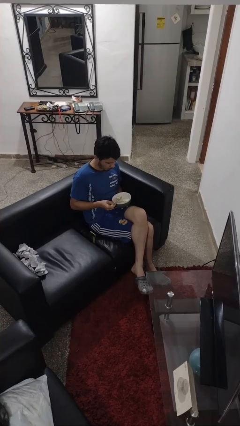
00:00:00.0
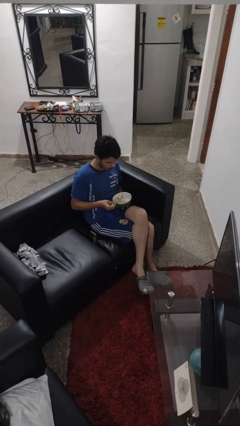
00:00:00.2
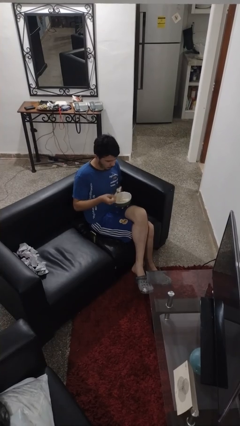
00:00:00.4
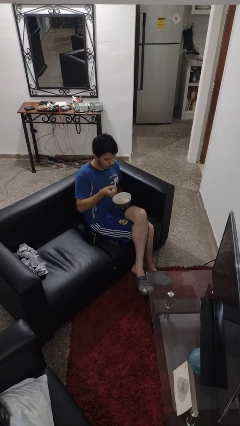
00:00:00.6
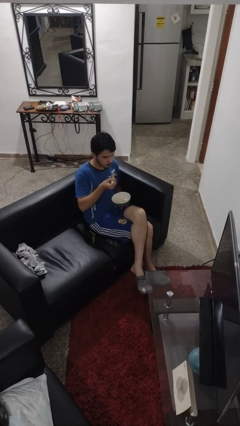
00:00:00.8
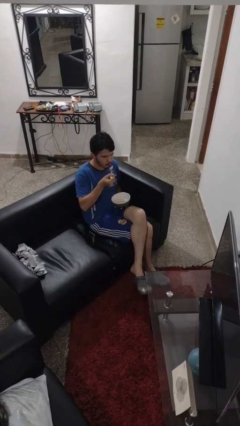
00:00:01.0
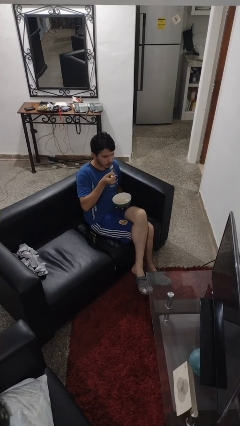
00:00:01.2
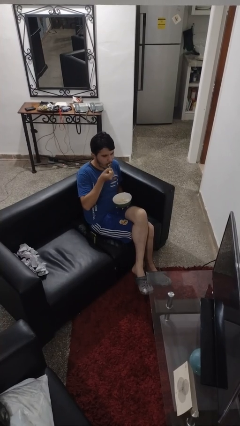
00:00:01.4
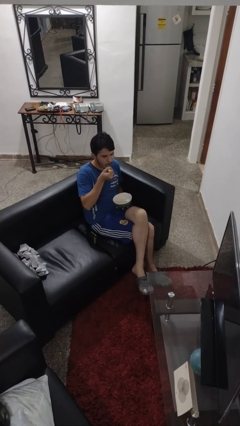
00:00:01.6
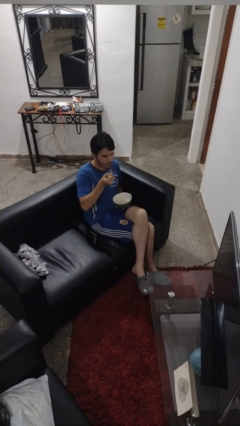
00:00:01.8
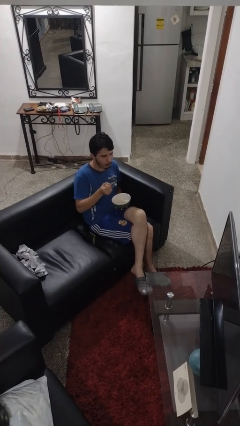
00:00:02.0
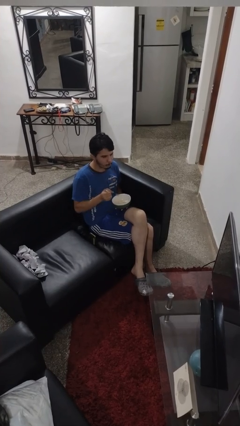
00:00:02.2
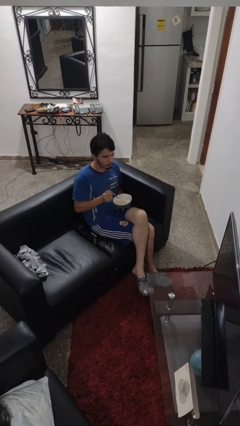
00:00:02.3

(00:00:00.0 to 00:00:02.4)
person eats with utensil

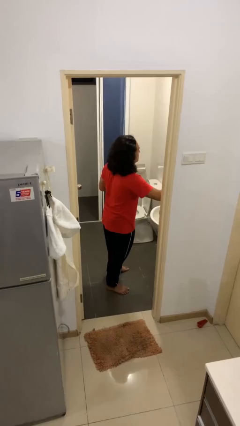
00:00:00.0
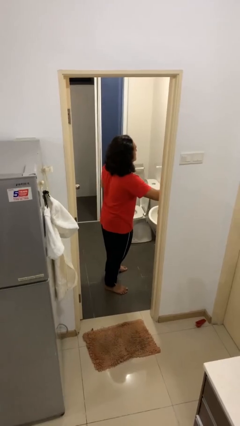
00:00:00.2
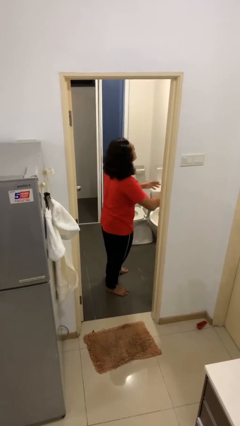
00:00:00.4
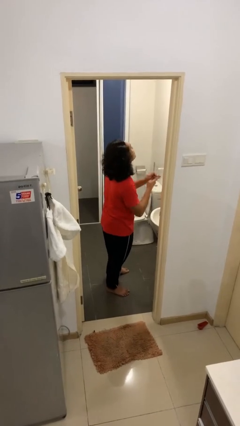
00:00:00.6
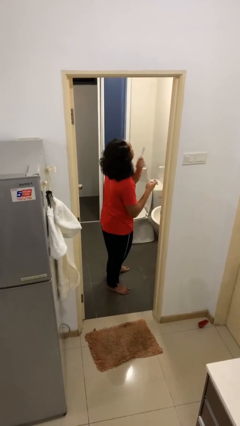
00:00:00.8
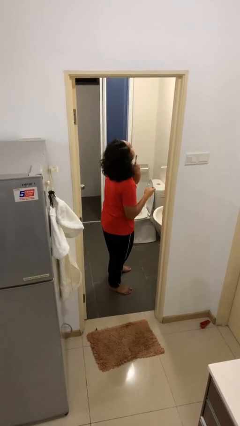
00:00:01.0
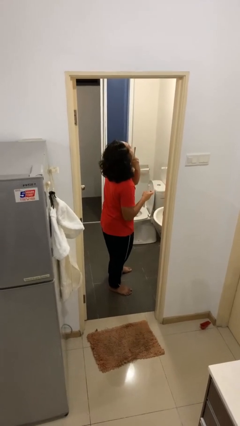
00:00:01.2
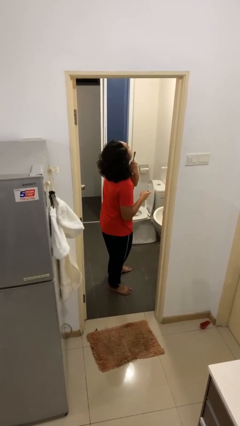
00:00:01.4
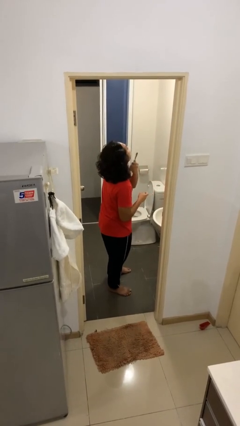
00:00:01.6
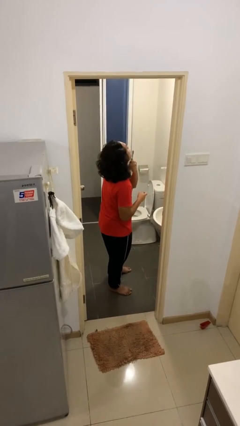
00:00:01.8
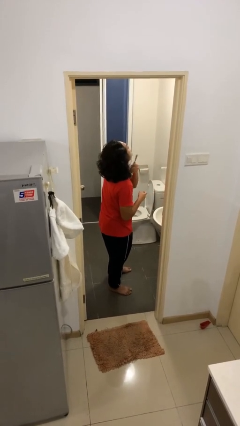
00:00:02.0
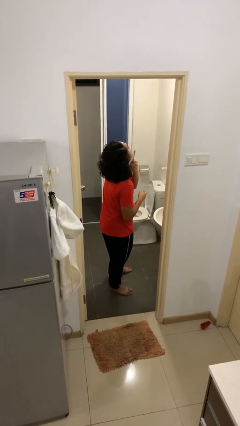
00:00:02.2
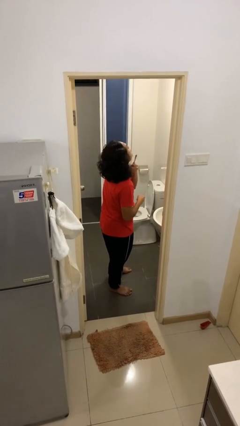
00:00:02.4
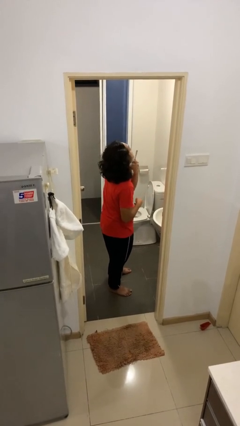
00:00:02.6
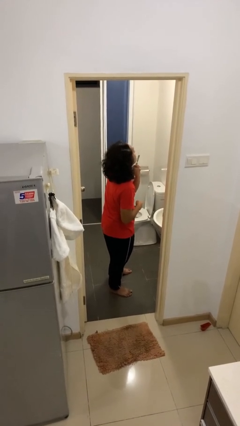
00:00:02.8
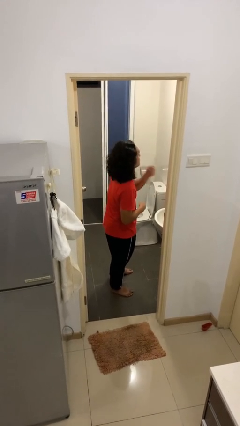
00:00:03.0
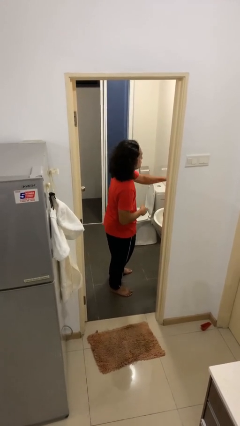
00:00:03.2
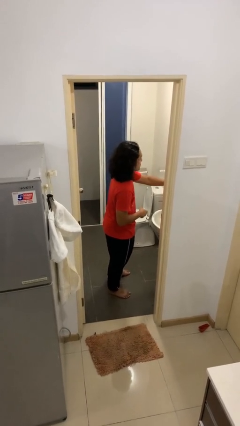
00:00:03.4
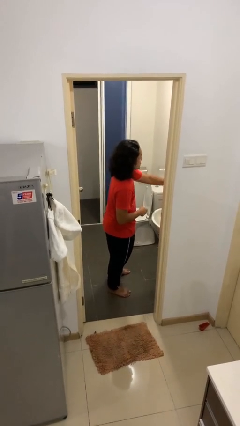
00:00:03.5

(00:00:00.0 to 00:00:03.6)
person shaves face

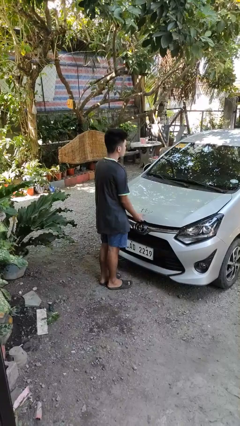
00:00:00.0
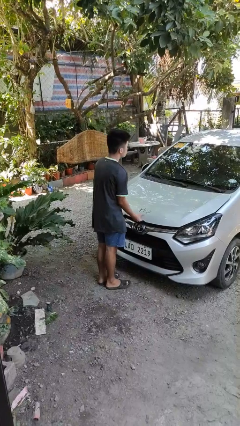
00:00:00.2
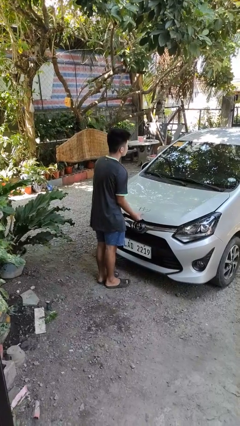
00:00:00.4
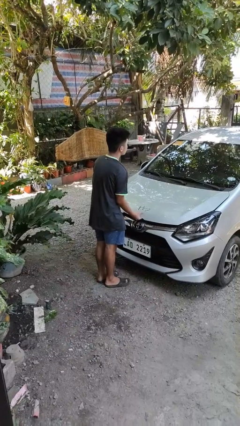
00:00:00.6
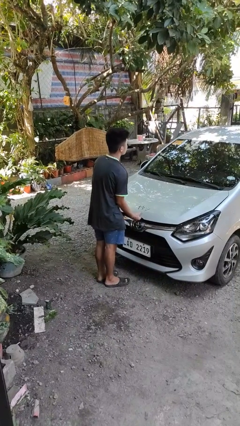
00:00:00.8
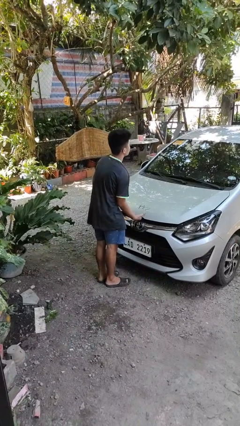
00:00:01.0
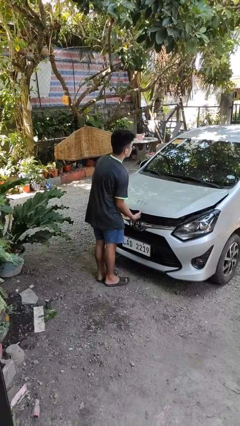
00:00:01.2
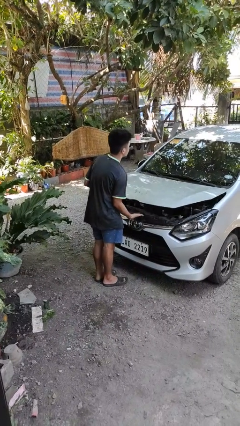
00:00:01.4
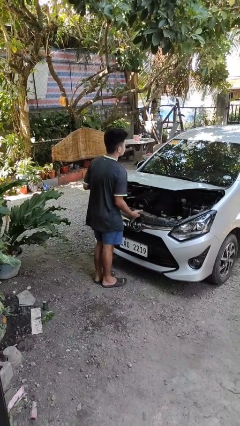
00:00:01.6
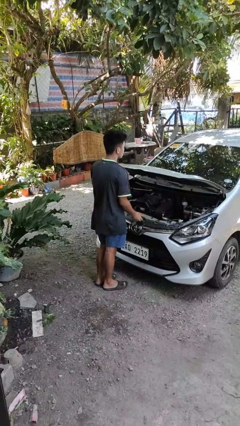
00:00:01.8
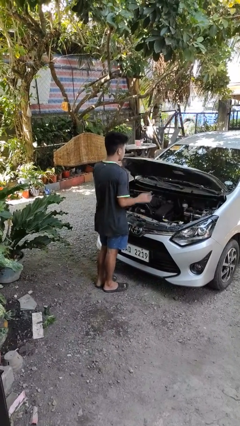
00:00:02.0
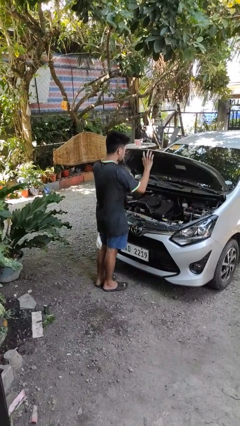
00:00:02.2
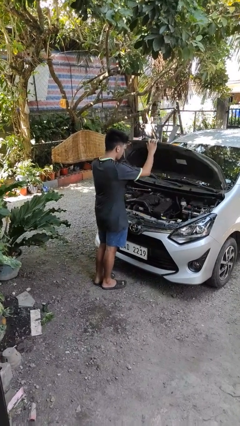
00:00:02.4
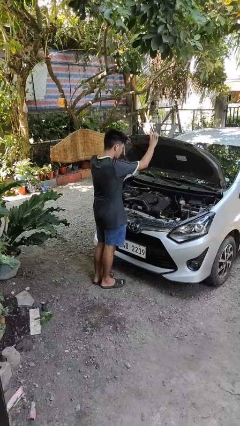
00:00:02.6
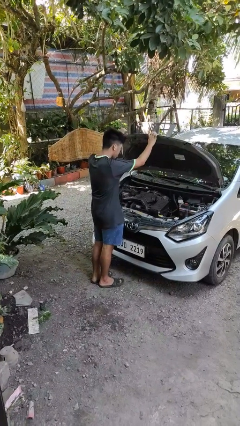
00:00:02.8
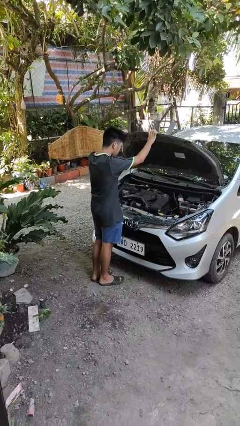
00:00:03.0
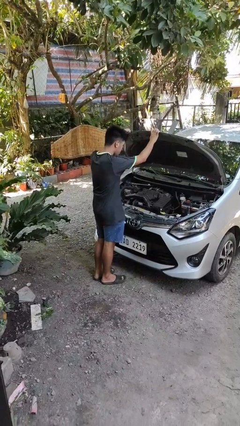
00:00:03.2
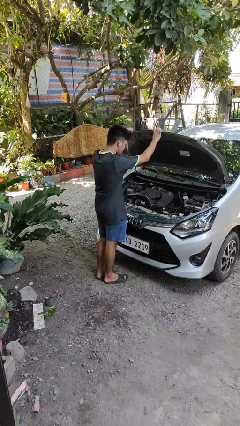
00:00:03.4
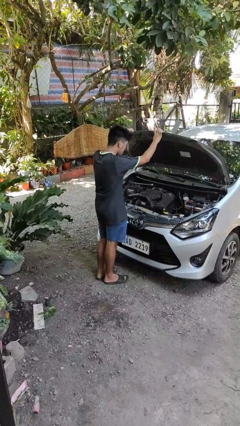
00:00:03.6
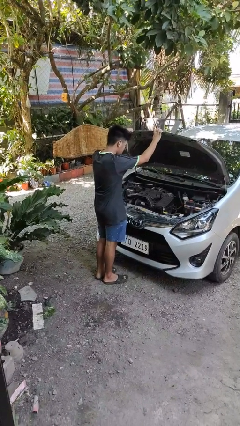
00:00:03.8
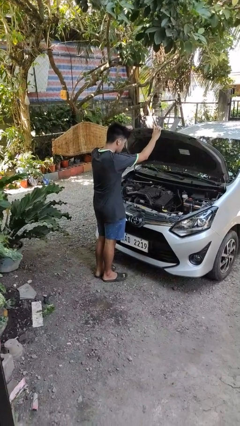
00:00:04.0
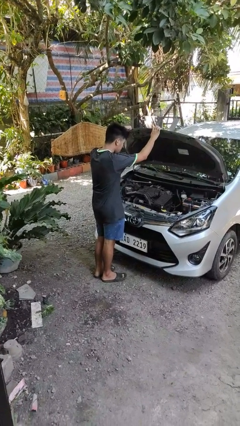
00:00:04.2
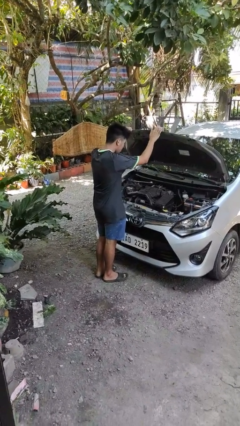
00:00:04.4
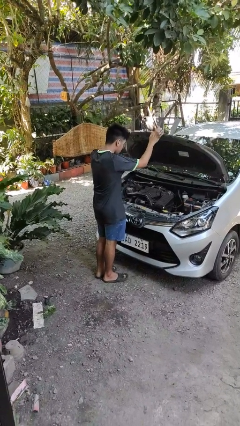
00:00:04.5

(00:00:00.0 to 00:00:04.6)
person opens car hood

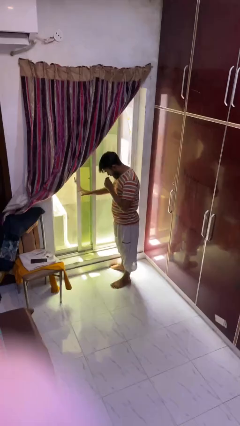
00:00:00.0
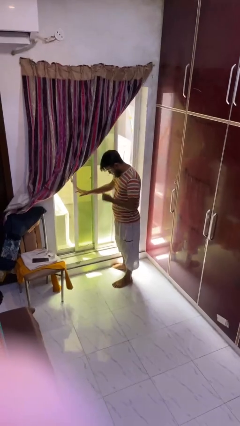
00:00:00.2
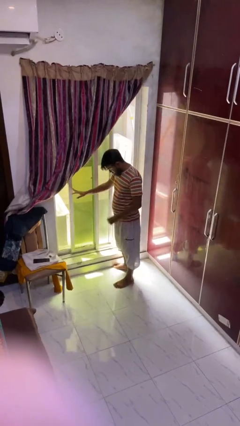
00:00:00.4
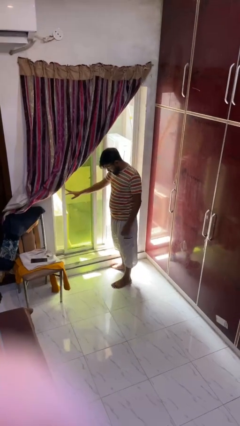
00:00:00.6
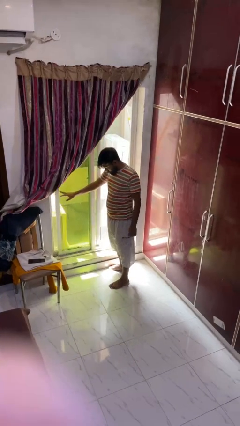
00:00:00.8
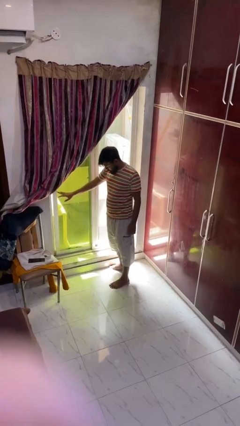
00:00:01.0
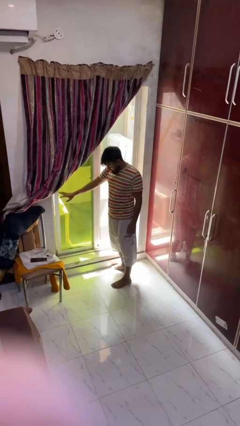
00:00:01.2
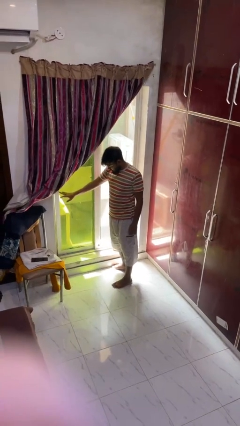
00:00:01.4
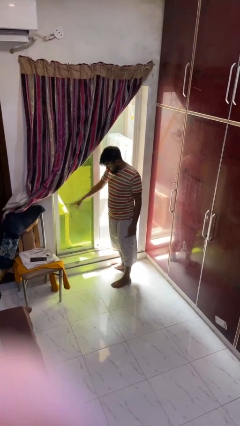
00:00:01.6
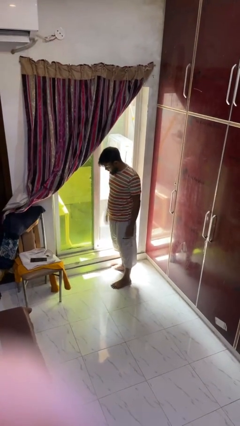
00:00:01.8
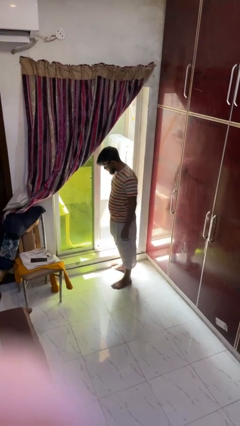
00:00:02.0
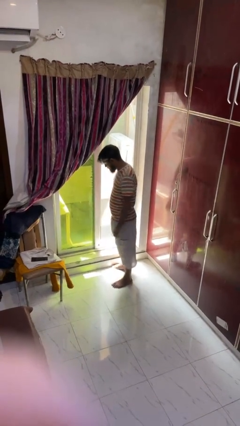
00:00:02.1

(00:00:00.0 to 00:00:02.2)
person opens home window

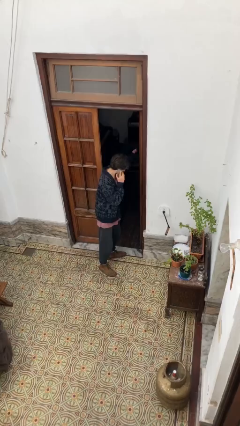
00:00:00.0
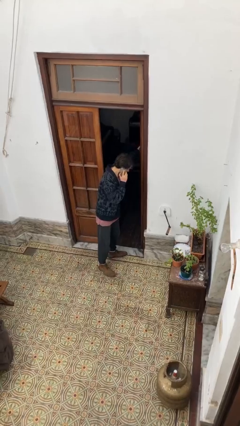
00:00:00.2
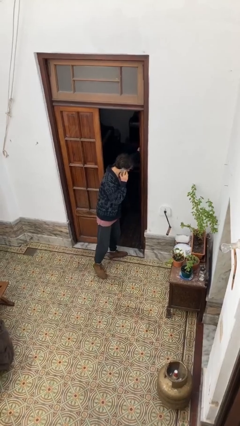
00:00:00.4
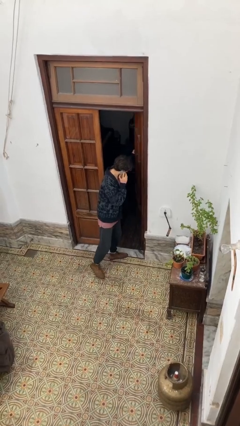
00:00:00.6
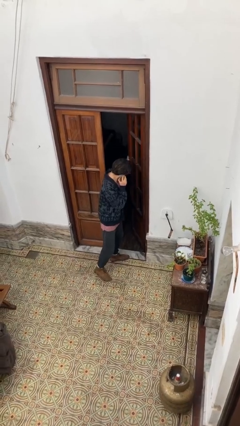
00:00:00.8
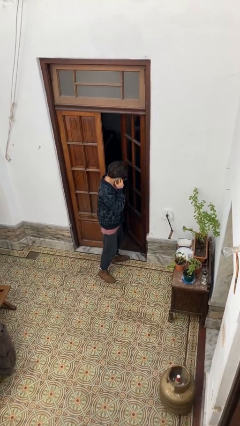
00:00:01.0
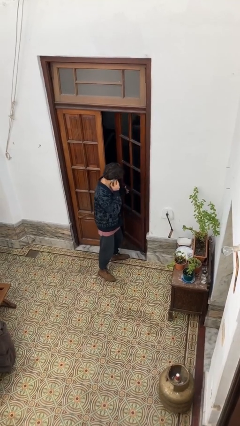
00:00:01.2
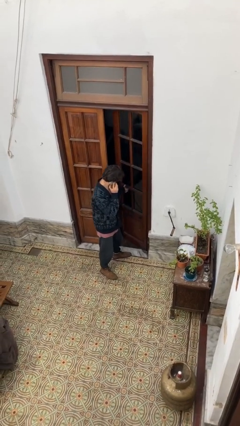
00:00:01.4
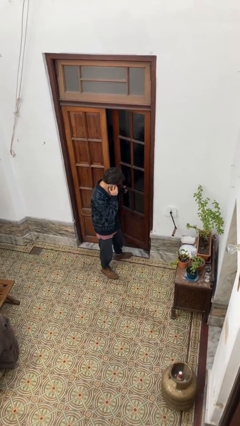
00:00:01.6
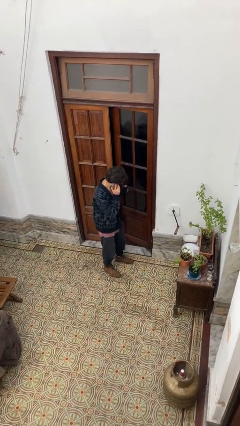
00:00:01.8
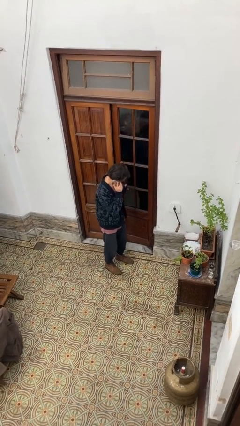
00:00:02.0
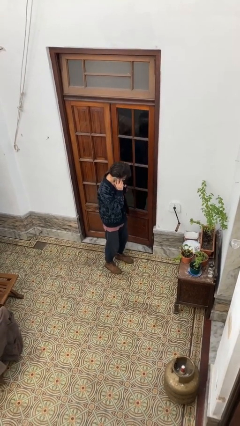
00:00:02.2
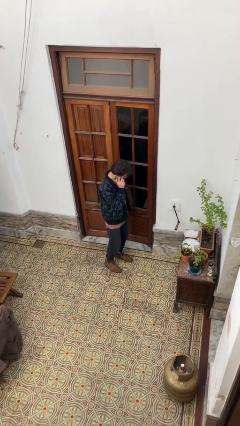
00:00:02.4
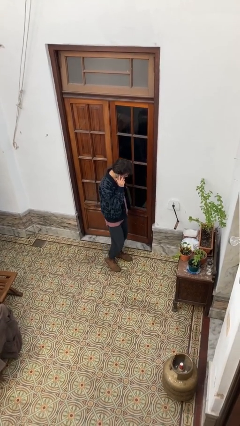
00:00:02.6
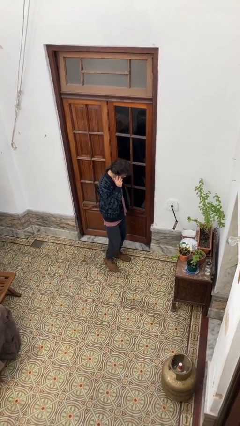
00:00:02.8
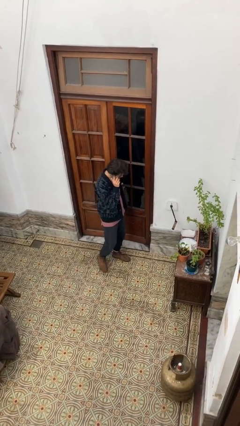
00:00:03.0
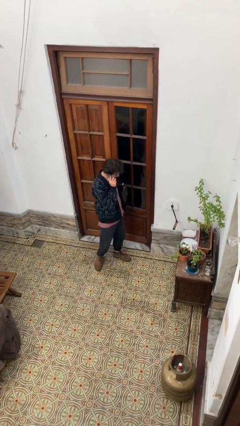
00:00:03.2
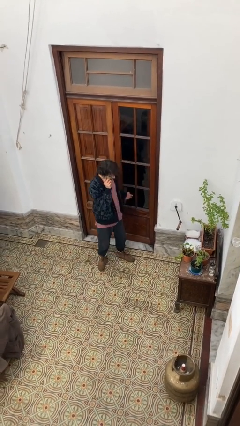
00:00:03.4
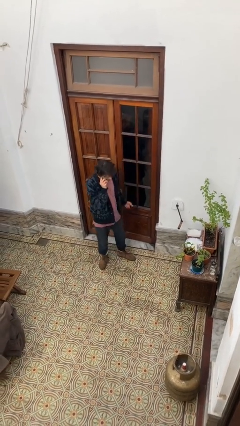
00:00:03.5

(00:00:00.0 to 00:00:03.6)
person closes facility door

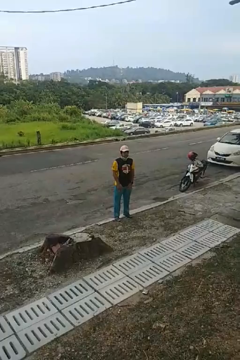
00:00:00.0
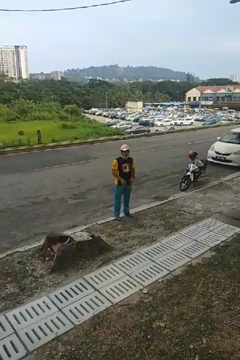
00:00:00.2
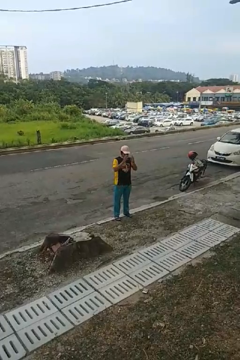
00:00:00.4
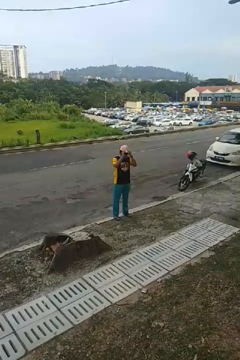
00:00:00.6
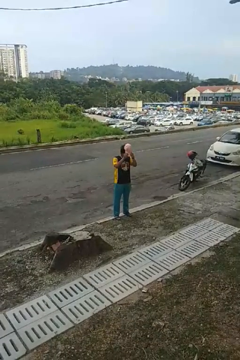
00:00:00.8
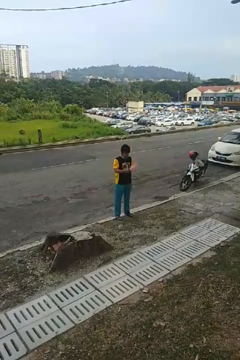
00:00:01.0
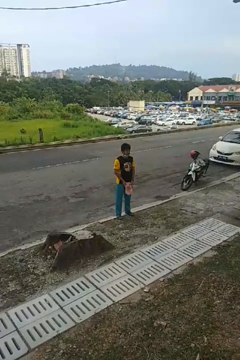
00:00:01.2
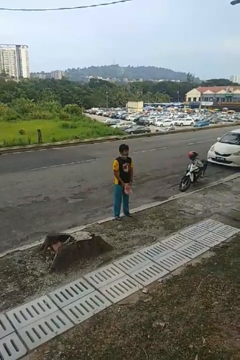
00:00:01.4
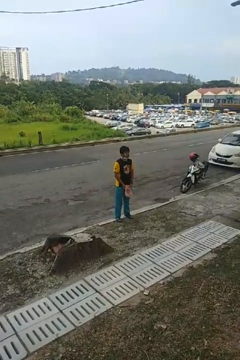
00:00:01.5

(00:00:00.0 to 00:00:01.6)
person takes off hat
